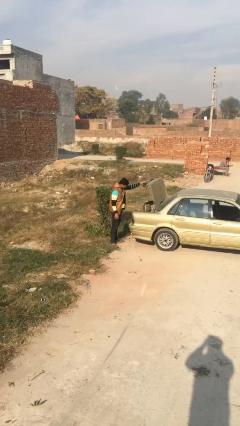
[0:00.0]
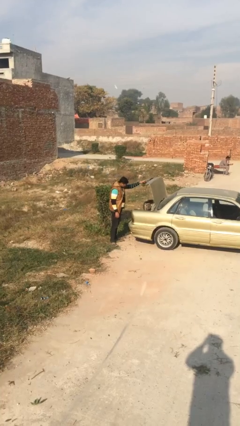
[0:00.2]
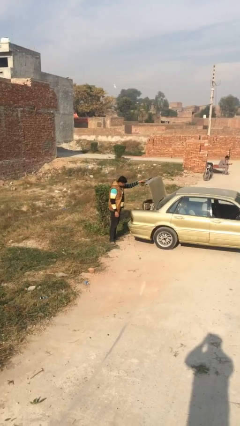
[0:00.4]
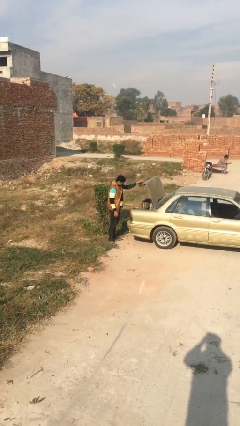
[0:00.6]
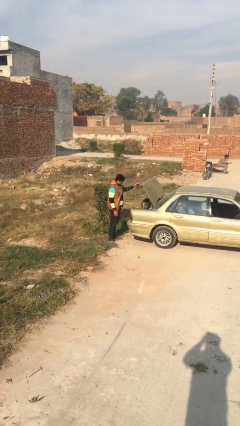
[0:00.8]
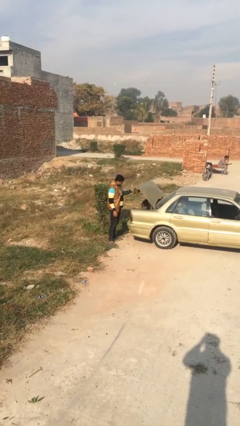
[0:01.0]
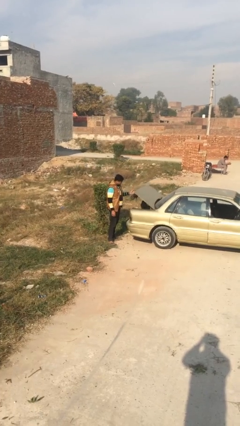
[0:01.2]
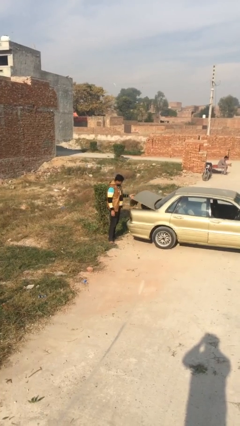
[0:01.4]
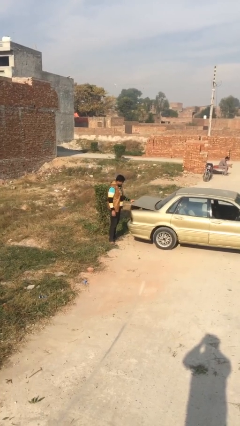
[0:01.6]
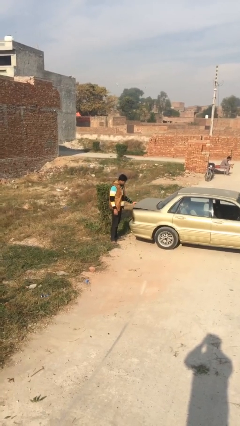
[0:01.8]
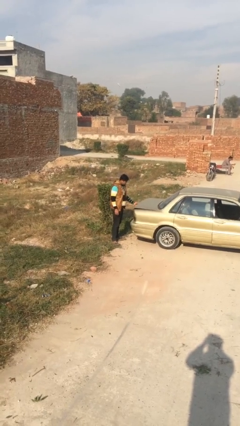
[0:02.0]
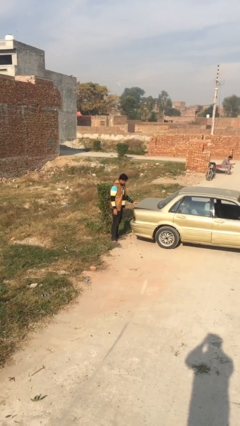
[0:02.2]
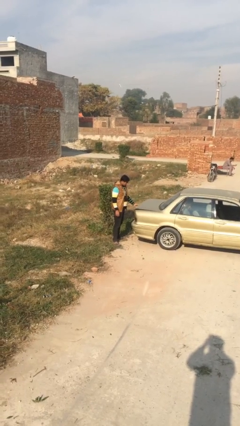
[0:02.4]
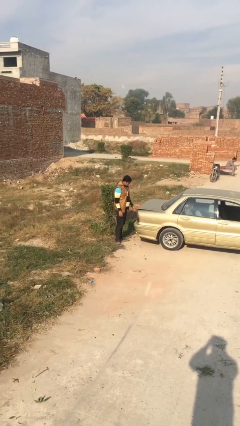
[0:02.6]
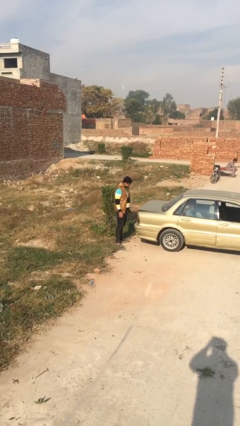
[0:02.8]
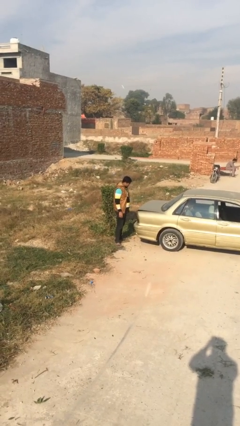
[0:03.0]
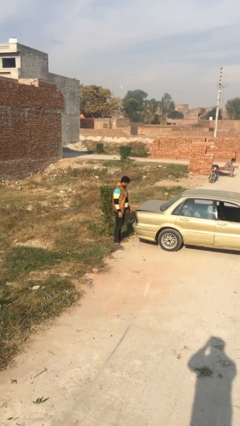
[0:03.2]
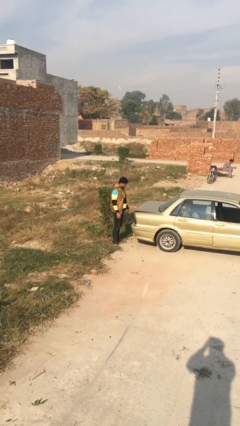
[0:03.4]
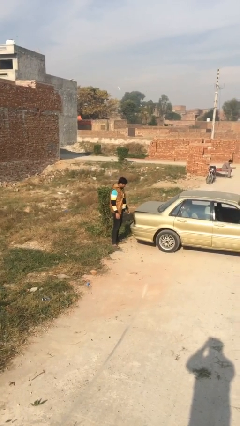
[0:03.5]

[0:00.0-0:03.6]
person closes car trunk

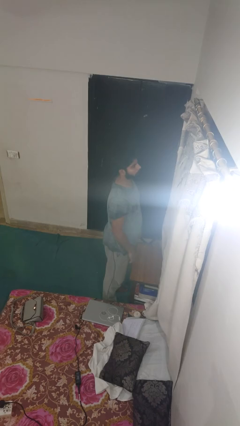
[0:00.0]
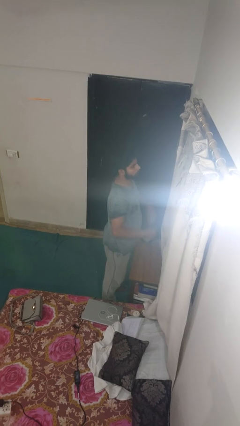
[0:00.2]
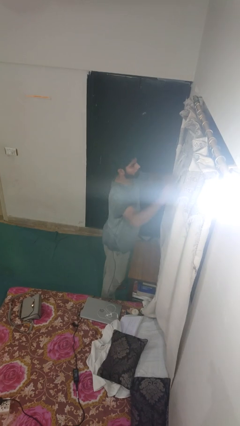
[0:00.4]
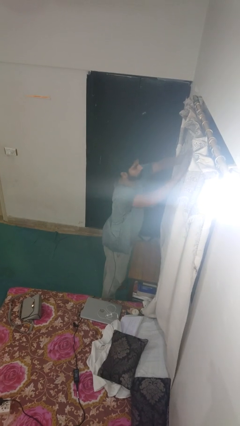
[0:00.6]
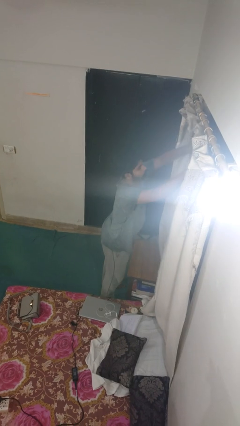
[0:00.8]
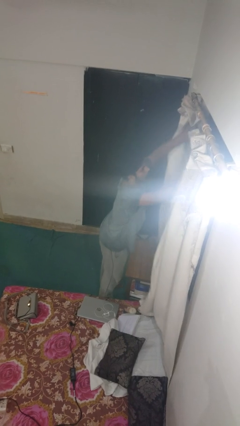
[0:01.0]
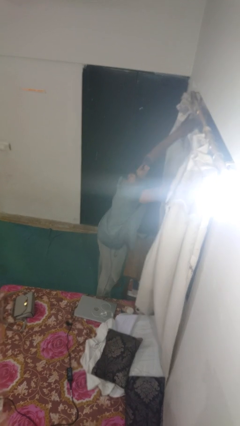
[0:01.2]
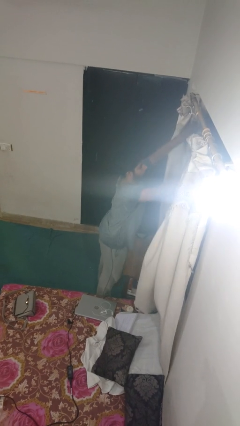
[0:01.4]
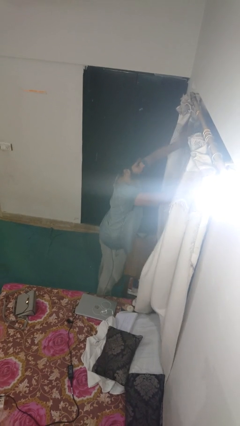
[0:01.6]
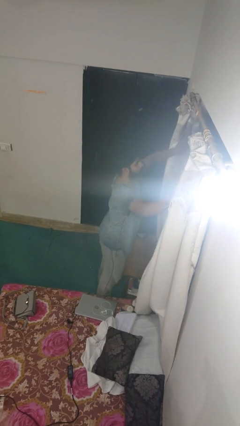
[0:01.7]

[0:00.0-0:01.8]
person opens curtains

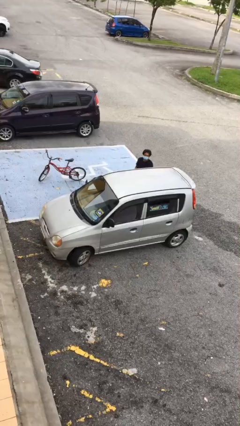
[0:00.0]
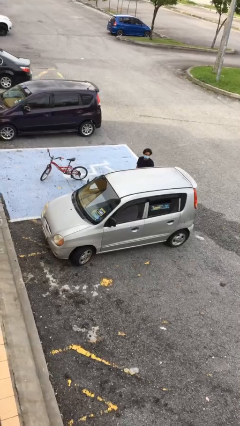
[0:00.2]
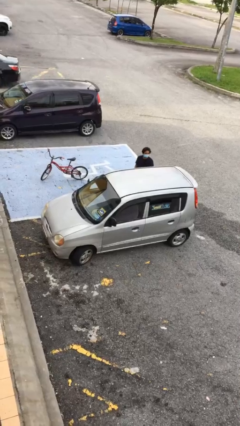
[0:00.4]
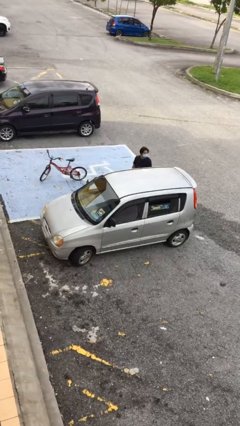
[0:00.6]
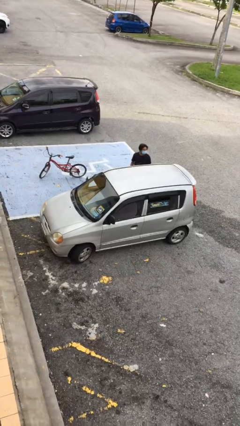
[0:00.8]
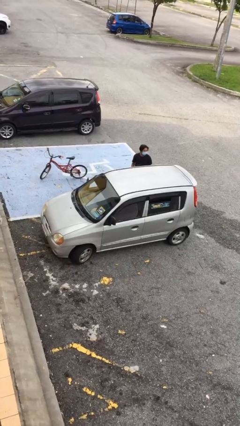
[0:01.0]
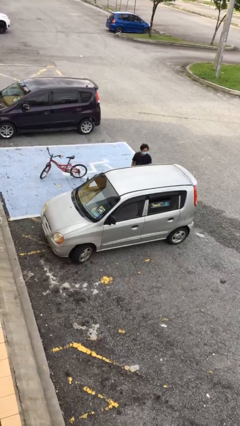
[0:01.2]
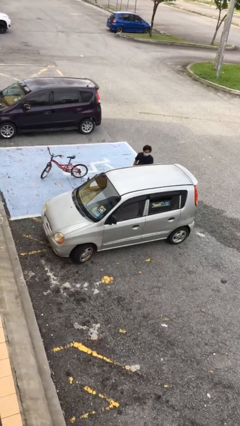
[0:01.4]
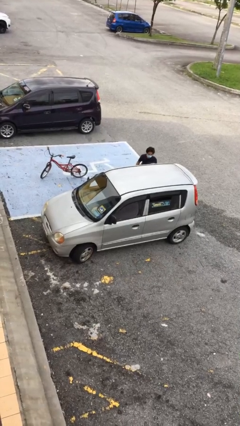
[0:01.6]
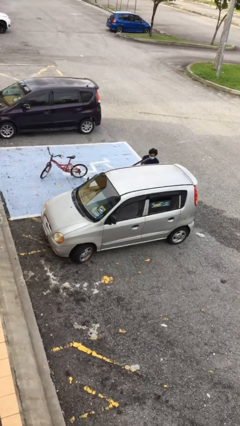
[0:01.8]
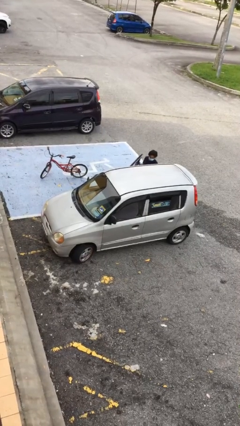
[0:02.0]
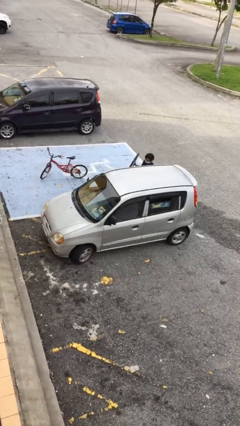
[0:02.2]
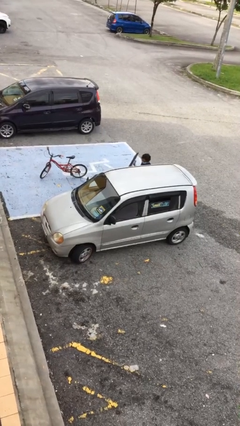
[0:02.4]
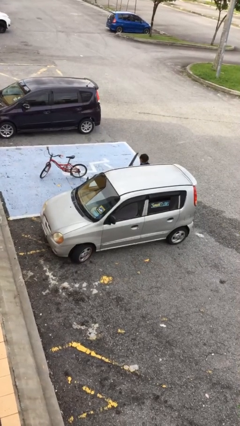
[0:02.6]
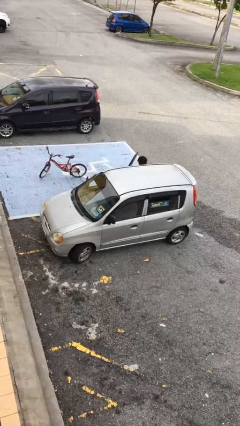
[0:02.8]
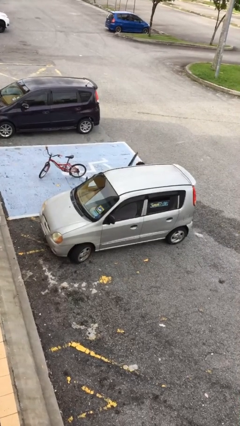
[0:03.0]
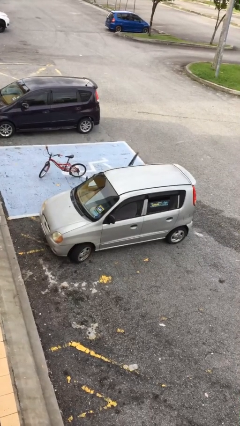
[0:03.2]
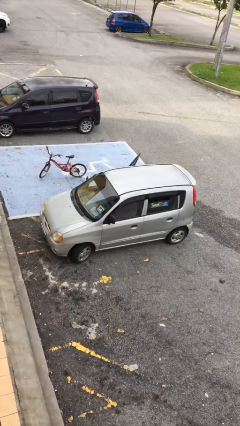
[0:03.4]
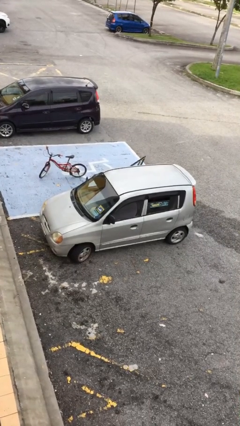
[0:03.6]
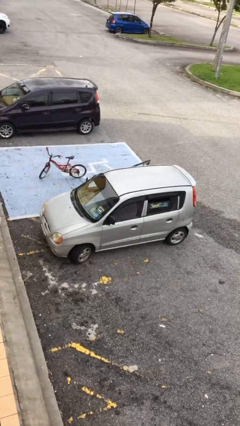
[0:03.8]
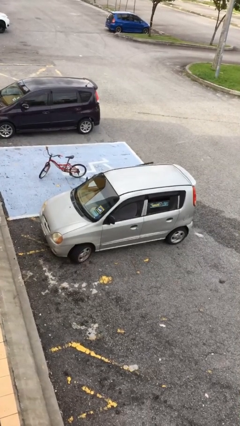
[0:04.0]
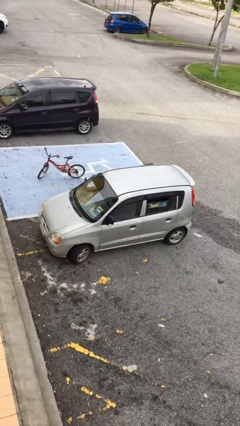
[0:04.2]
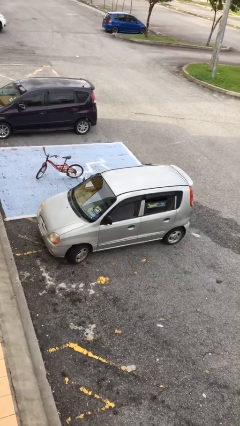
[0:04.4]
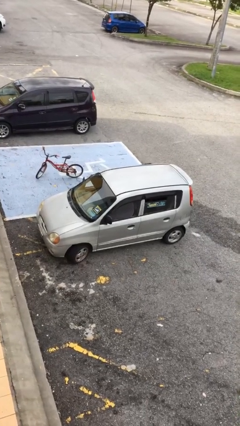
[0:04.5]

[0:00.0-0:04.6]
car picks up person

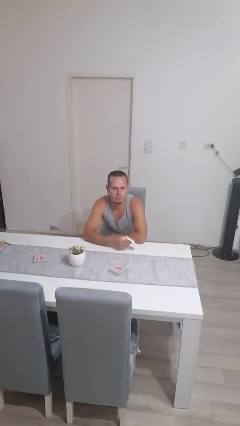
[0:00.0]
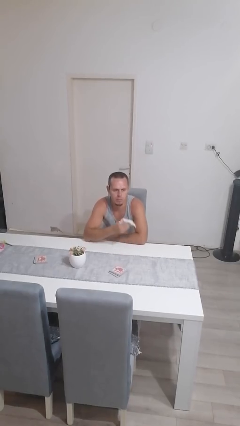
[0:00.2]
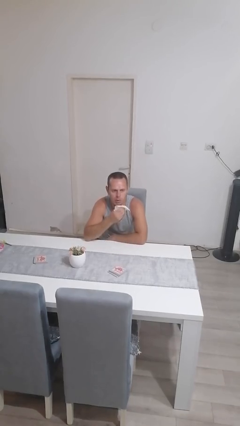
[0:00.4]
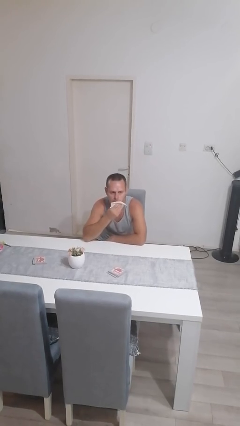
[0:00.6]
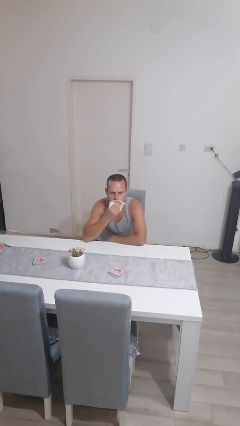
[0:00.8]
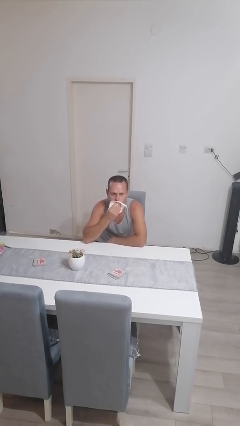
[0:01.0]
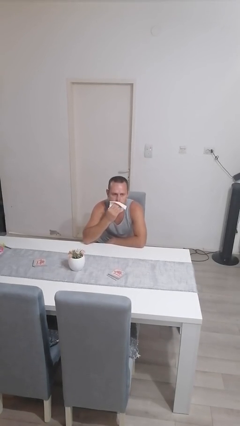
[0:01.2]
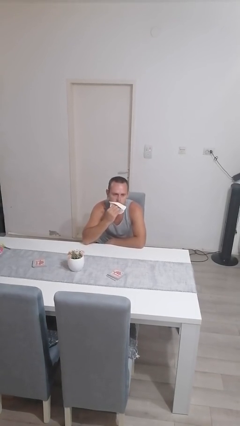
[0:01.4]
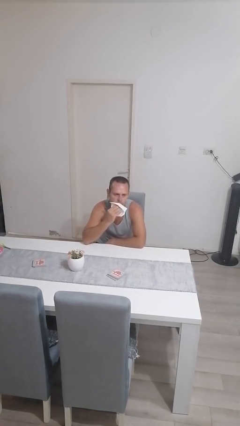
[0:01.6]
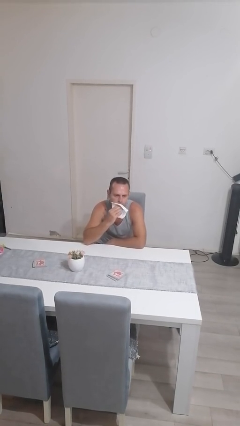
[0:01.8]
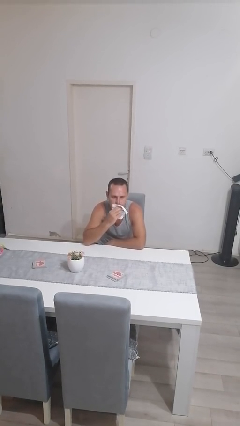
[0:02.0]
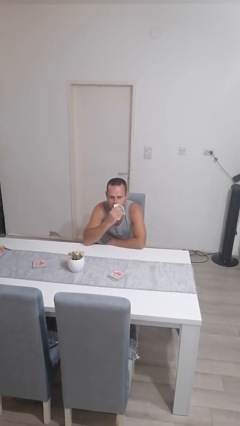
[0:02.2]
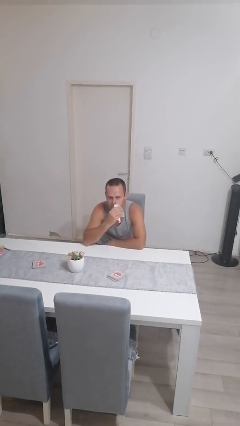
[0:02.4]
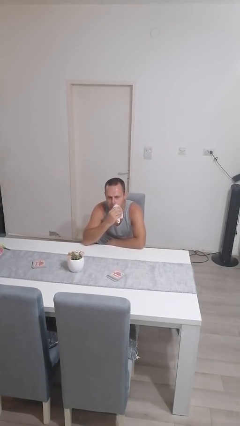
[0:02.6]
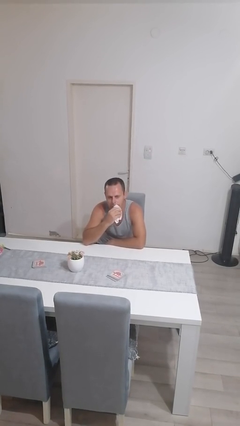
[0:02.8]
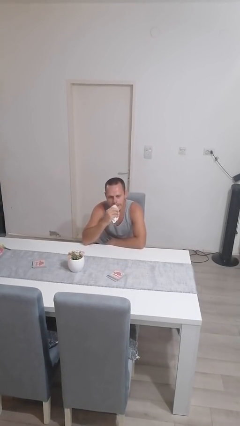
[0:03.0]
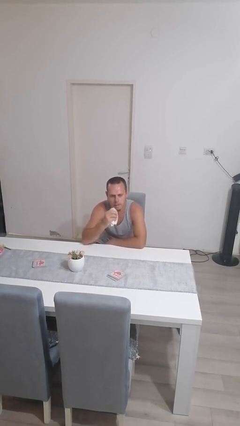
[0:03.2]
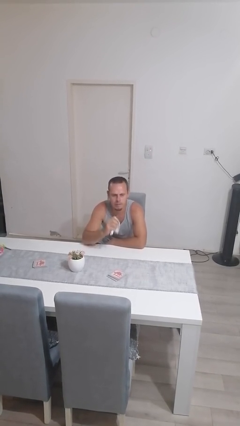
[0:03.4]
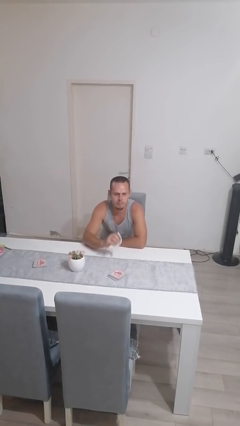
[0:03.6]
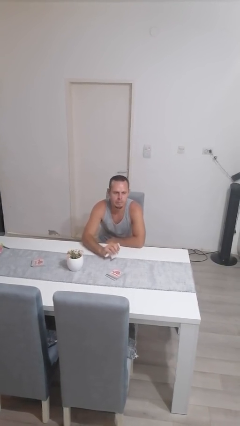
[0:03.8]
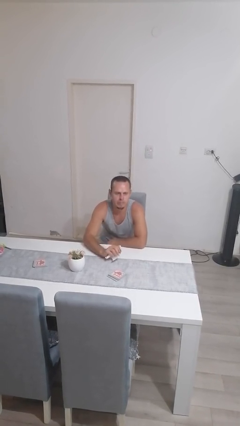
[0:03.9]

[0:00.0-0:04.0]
person wipes mouth with napkin

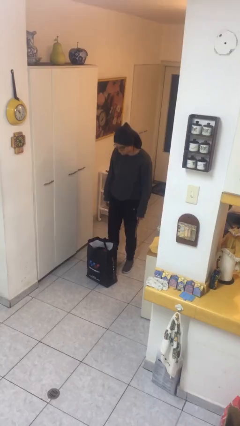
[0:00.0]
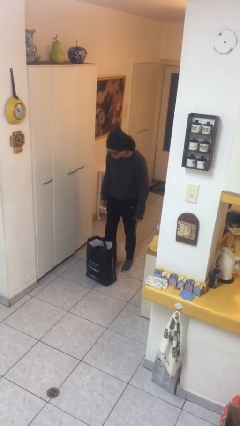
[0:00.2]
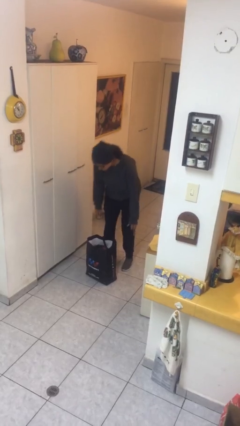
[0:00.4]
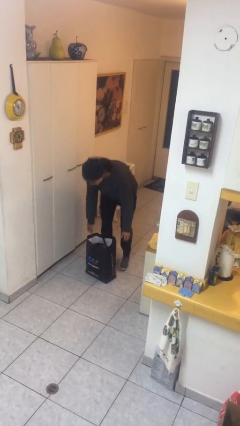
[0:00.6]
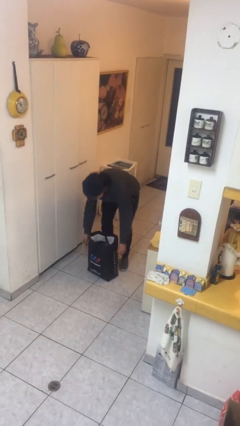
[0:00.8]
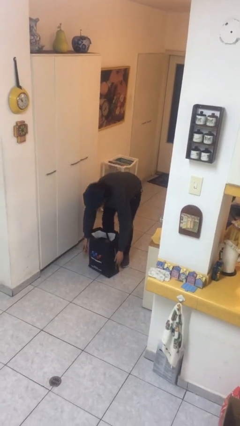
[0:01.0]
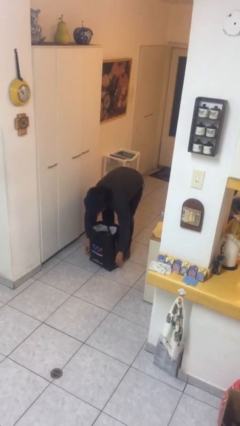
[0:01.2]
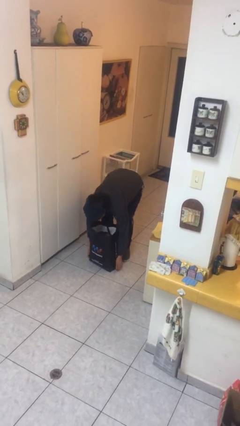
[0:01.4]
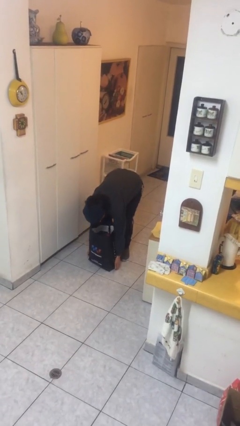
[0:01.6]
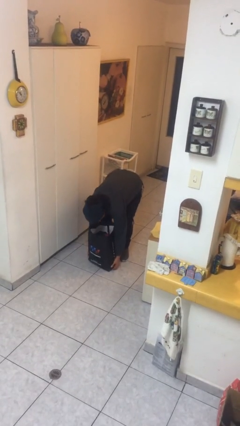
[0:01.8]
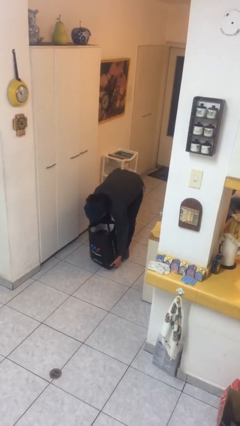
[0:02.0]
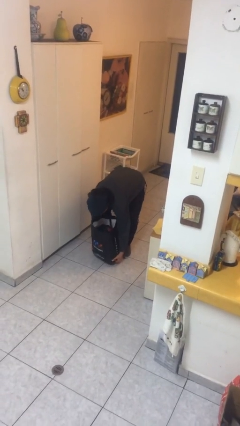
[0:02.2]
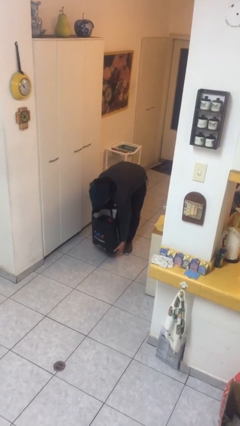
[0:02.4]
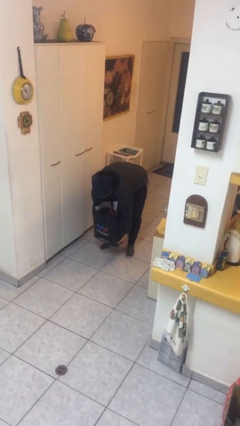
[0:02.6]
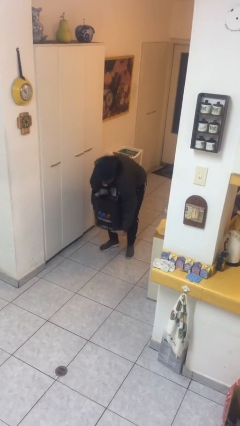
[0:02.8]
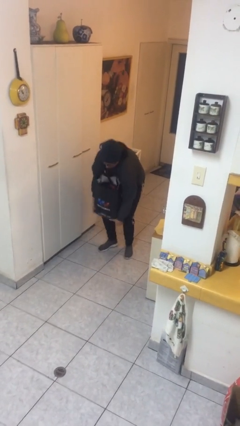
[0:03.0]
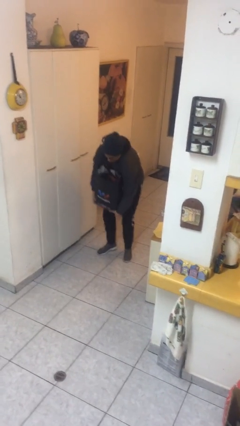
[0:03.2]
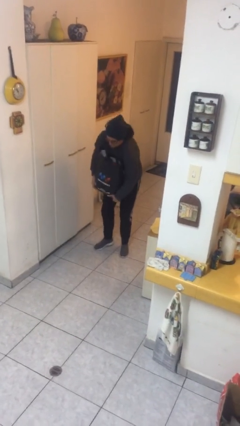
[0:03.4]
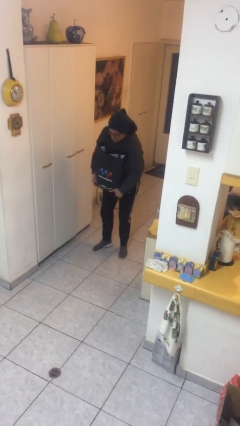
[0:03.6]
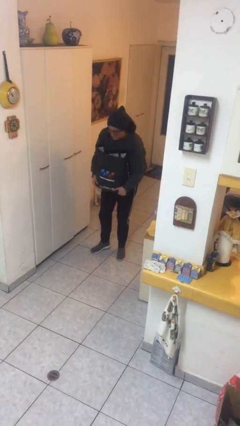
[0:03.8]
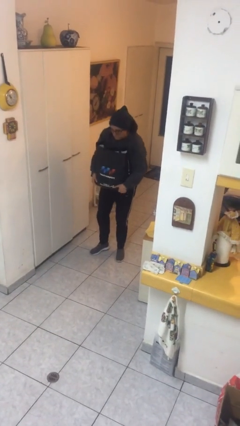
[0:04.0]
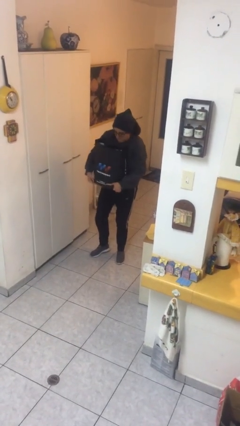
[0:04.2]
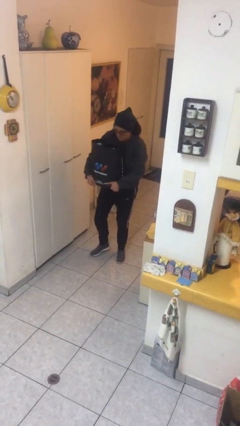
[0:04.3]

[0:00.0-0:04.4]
person picks up object from floor
